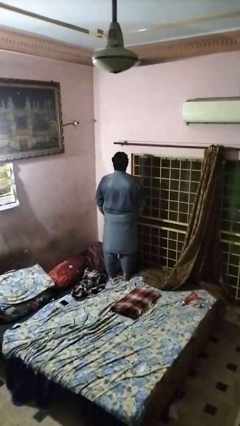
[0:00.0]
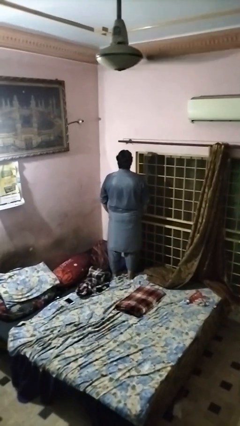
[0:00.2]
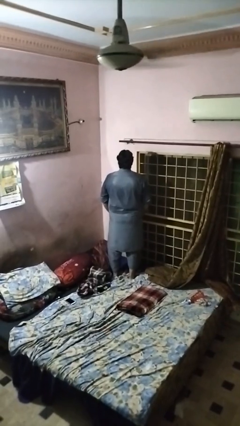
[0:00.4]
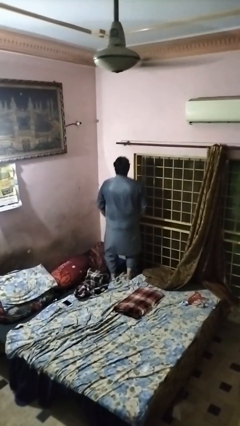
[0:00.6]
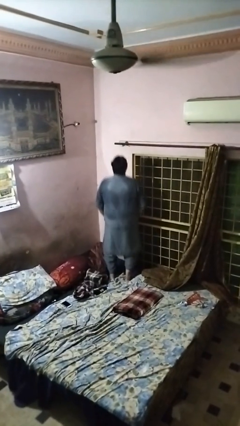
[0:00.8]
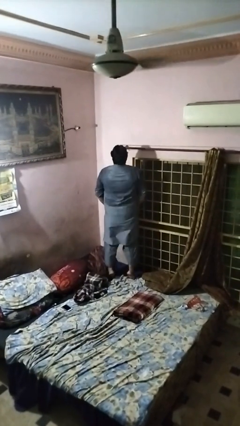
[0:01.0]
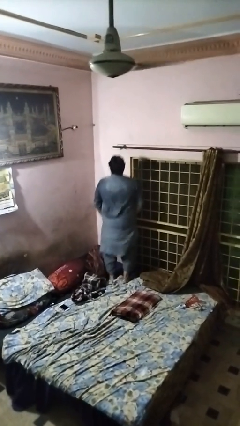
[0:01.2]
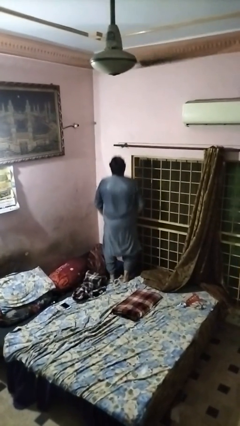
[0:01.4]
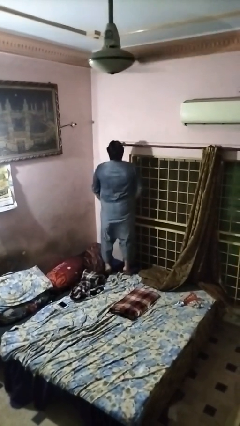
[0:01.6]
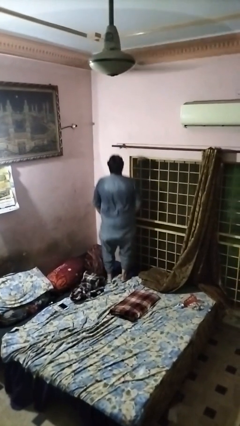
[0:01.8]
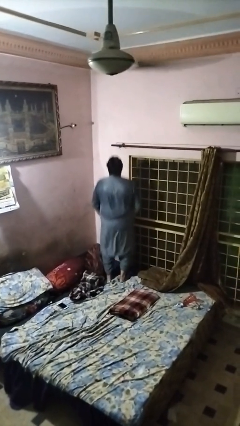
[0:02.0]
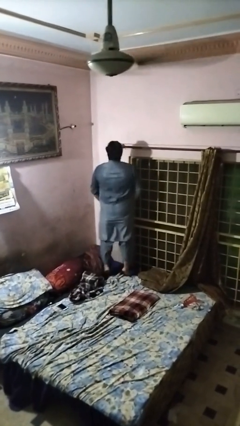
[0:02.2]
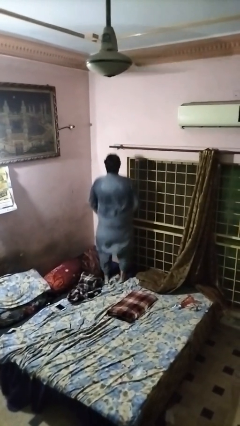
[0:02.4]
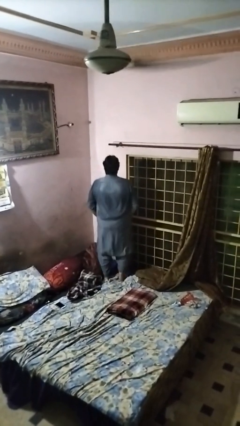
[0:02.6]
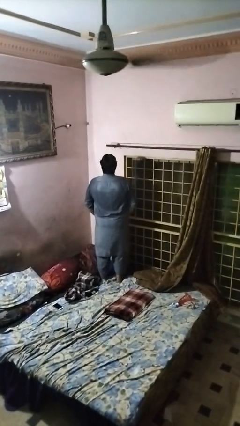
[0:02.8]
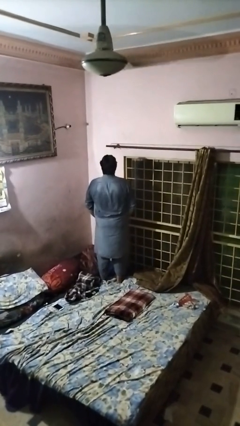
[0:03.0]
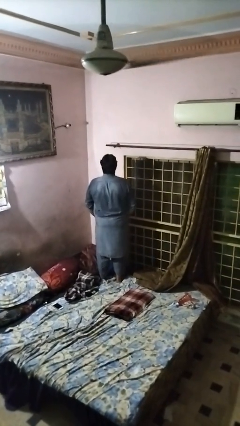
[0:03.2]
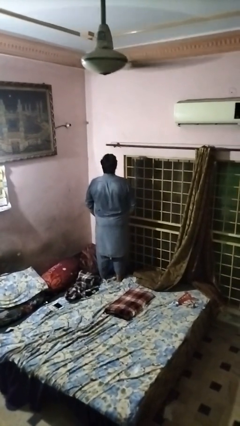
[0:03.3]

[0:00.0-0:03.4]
person jumps on bed

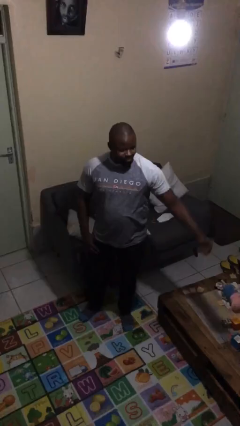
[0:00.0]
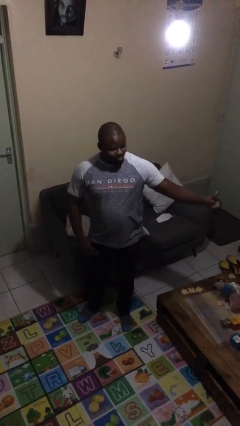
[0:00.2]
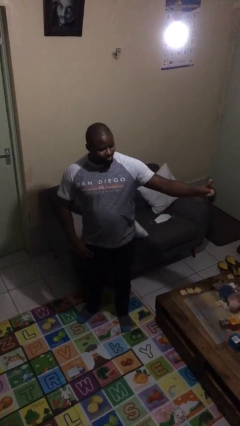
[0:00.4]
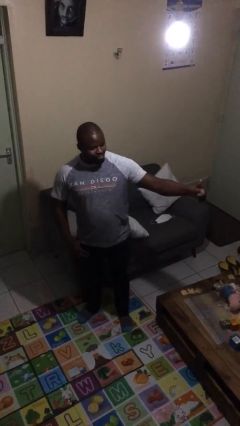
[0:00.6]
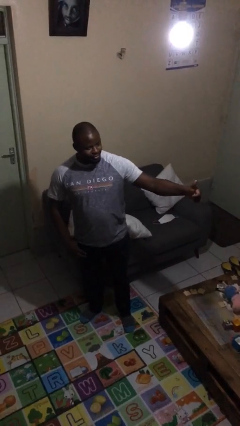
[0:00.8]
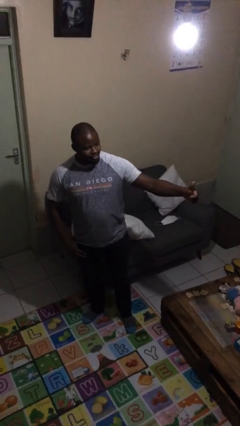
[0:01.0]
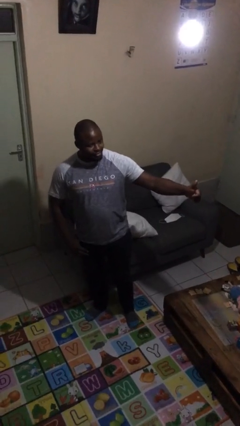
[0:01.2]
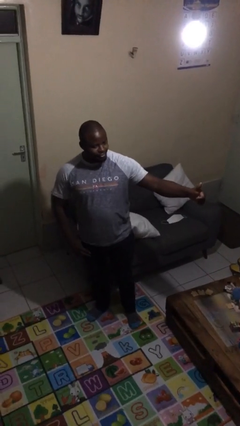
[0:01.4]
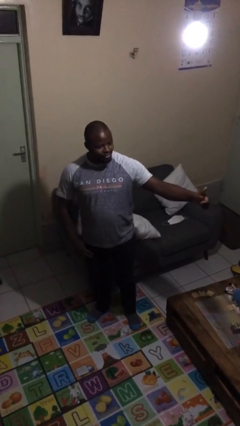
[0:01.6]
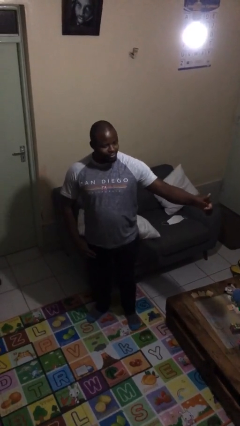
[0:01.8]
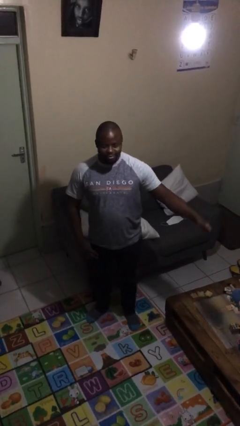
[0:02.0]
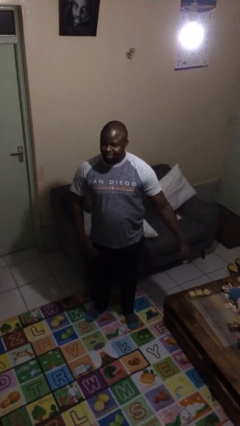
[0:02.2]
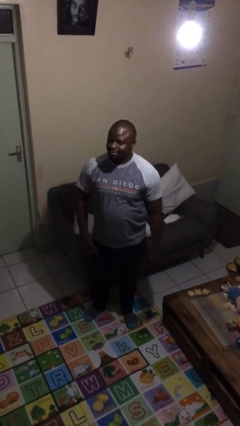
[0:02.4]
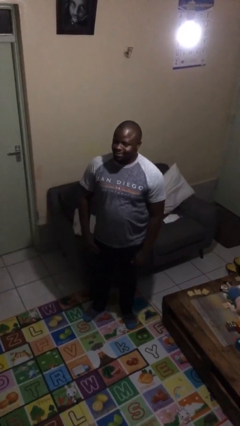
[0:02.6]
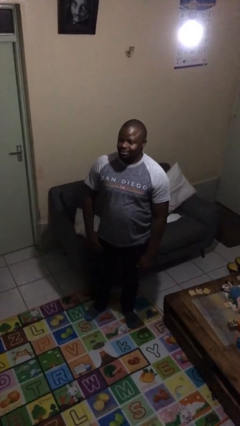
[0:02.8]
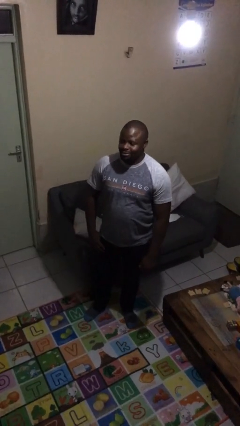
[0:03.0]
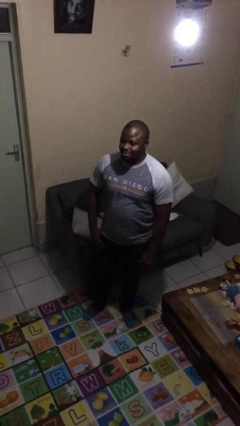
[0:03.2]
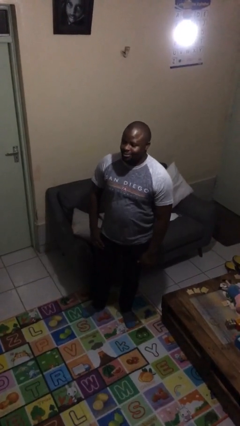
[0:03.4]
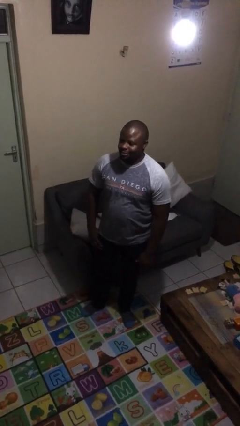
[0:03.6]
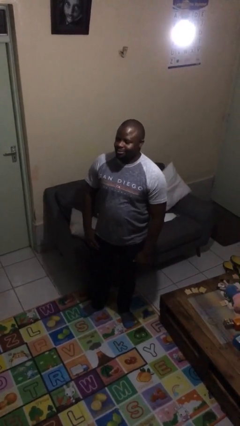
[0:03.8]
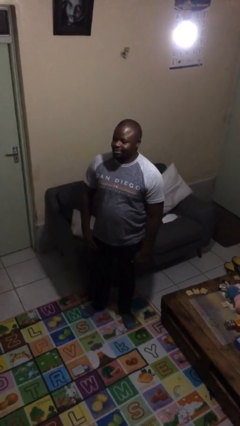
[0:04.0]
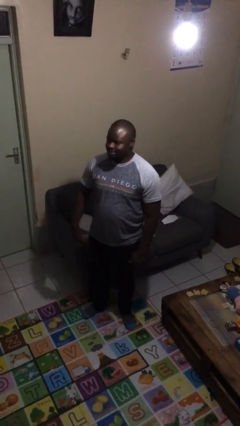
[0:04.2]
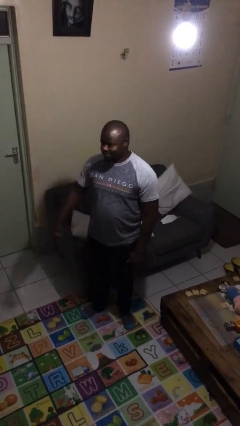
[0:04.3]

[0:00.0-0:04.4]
person gestures thumbs up

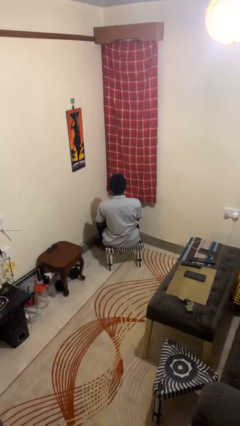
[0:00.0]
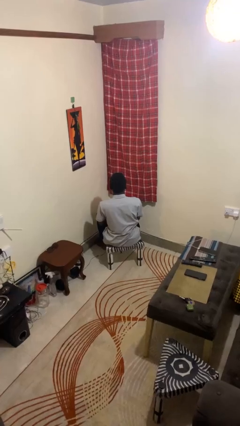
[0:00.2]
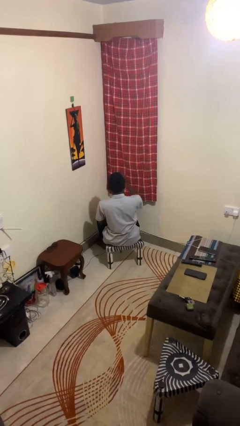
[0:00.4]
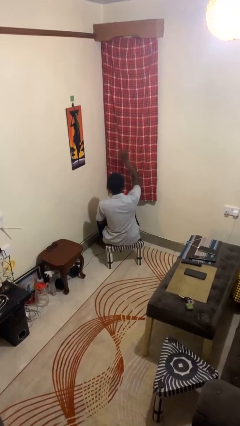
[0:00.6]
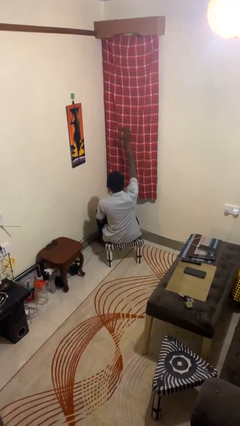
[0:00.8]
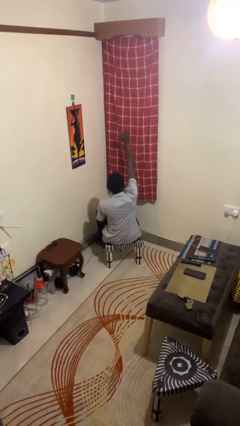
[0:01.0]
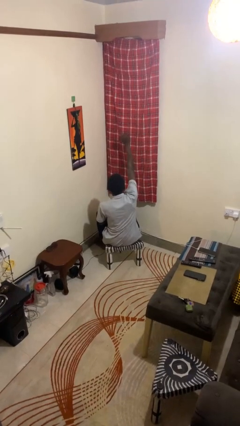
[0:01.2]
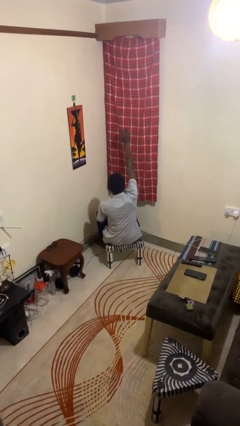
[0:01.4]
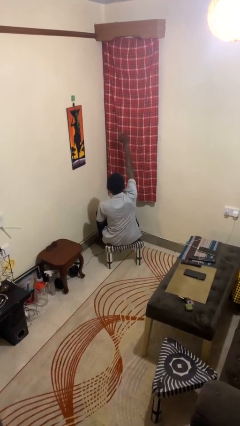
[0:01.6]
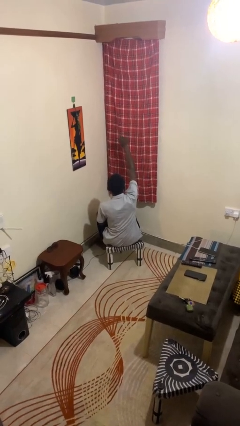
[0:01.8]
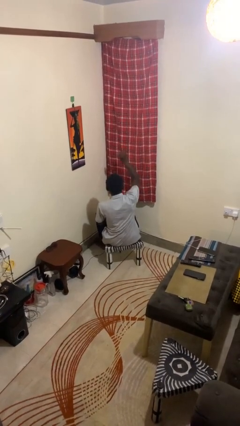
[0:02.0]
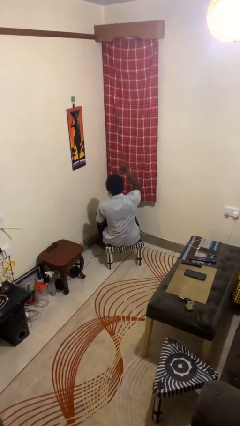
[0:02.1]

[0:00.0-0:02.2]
person gestures come here

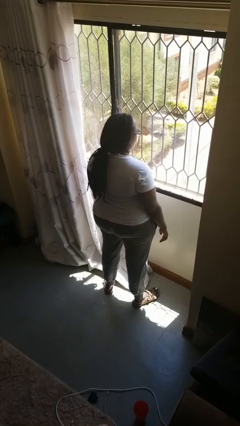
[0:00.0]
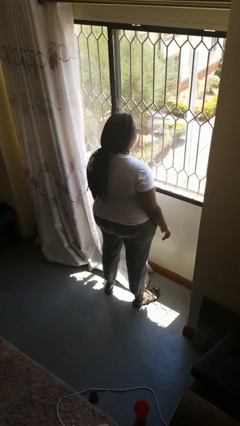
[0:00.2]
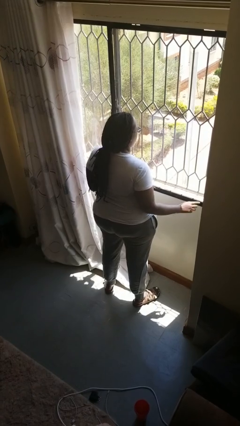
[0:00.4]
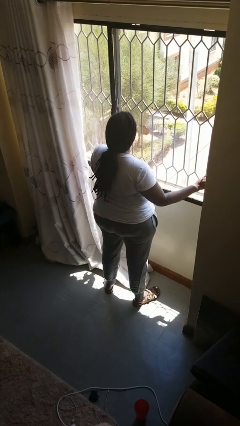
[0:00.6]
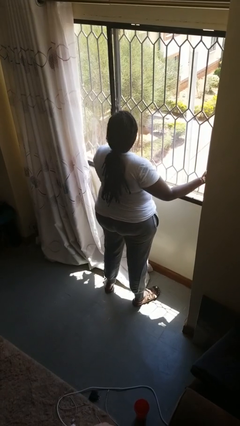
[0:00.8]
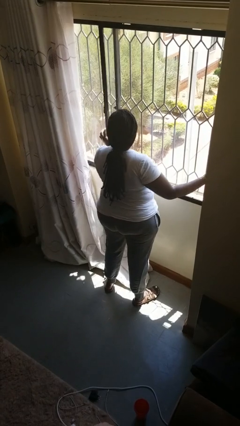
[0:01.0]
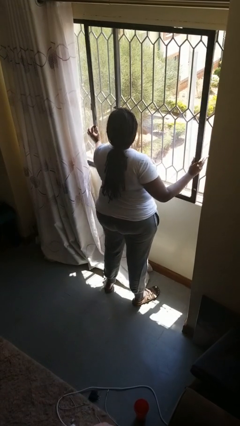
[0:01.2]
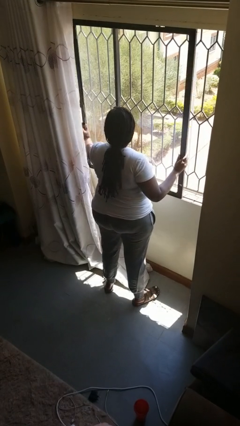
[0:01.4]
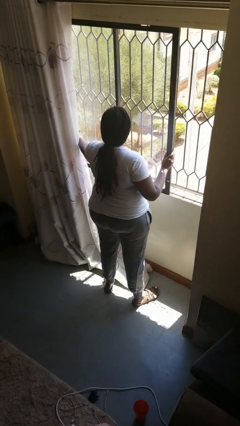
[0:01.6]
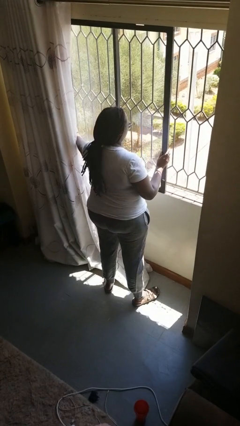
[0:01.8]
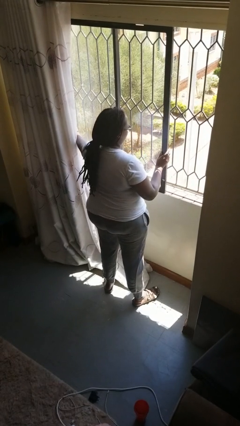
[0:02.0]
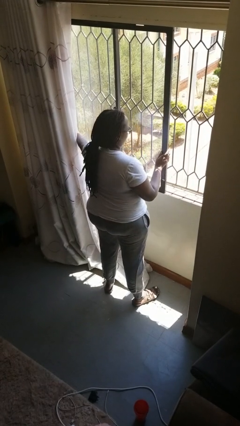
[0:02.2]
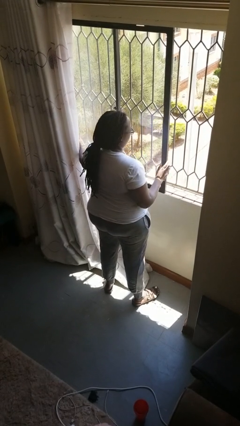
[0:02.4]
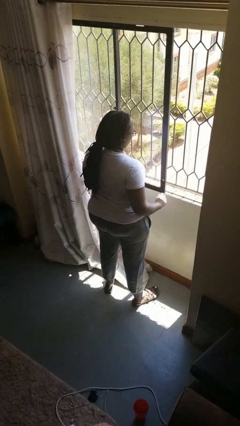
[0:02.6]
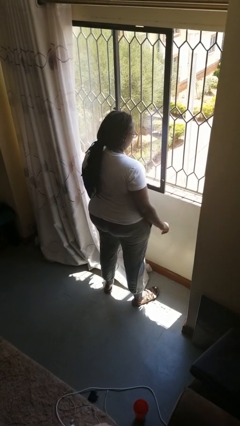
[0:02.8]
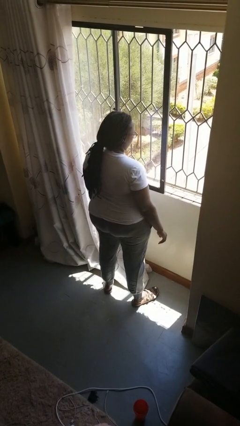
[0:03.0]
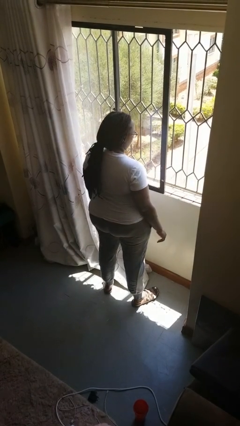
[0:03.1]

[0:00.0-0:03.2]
person opens home window

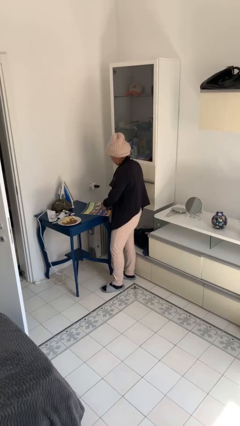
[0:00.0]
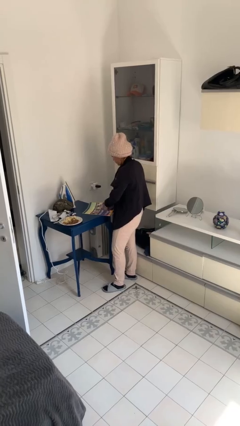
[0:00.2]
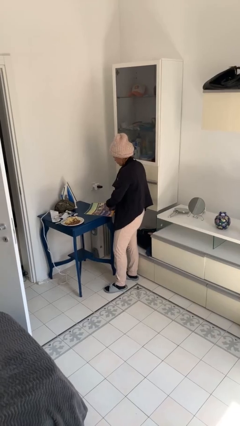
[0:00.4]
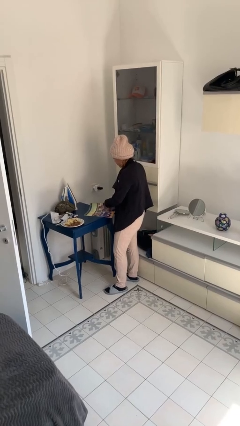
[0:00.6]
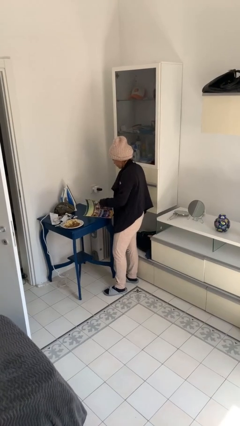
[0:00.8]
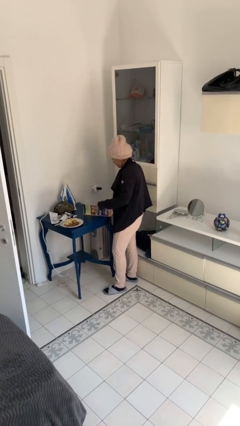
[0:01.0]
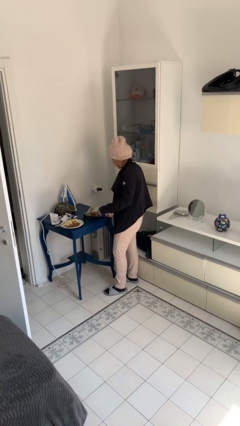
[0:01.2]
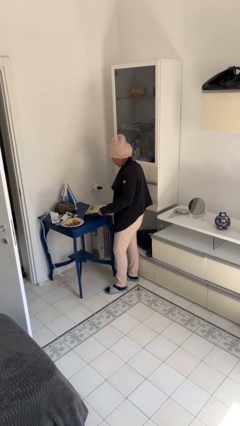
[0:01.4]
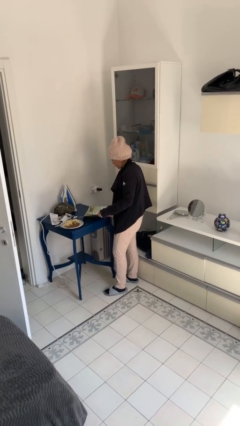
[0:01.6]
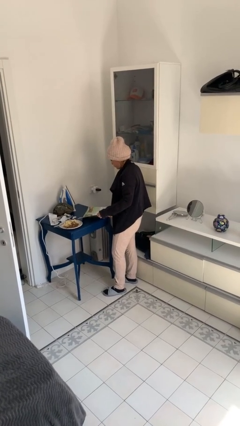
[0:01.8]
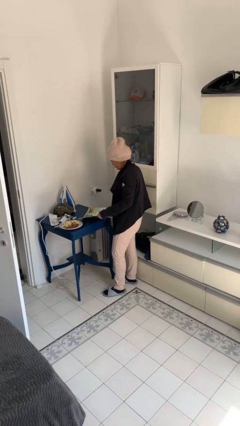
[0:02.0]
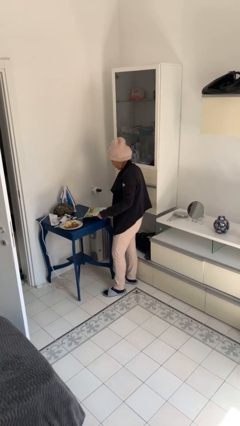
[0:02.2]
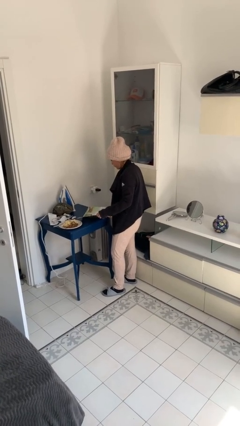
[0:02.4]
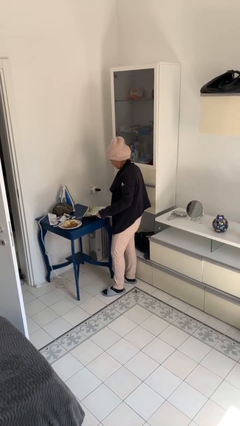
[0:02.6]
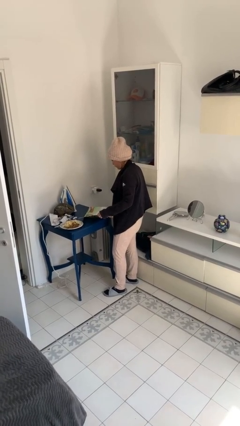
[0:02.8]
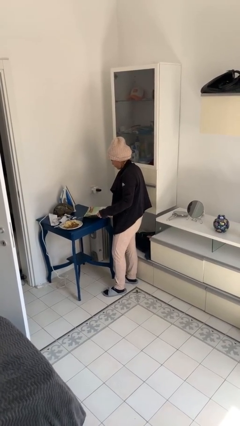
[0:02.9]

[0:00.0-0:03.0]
person reads magazine

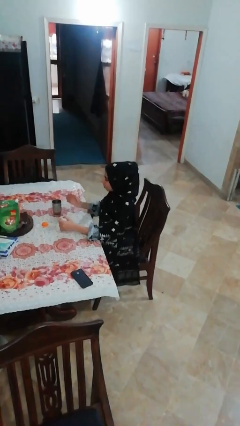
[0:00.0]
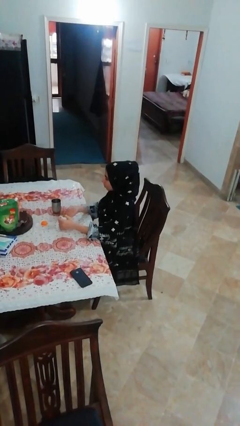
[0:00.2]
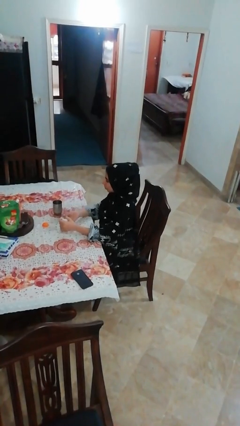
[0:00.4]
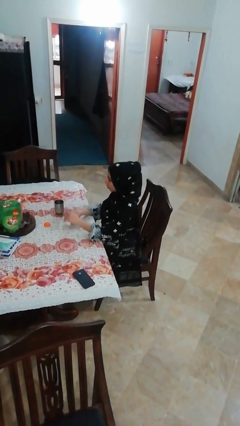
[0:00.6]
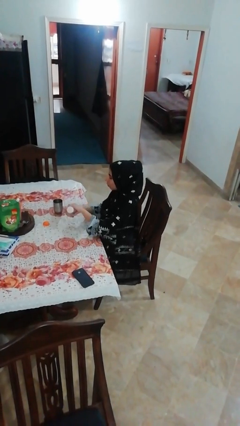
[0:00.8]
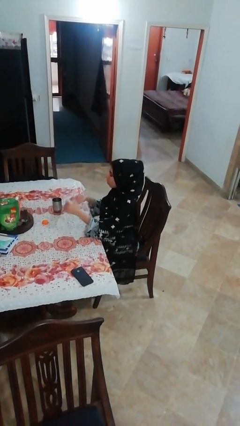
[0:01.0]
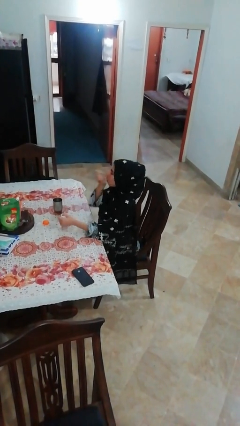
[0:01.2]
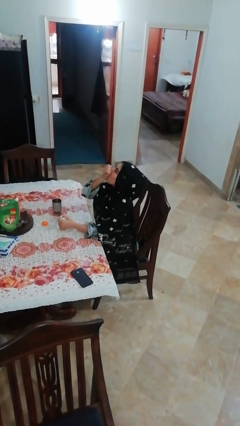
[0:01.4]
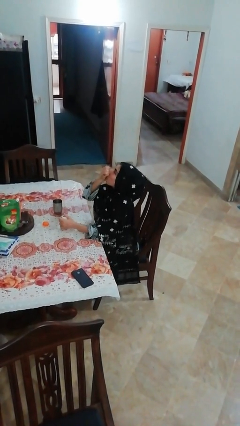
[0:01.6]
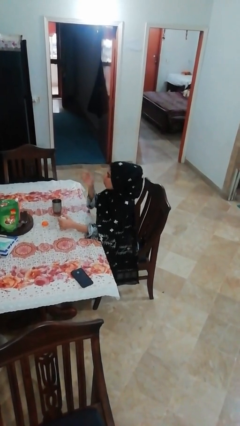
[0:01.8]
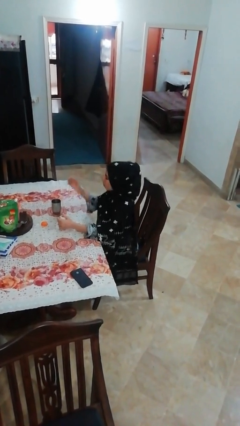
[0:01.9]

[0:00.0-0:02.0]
person takes medicine pills
